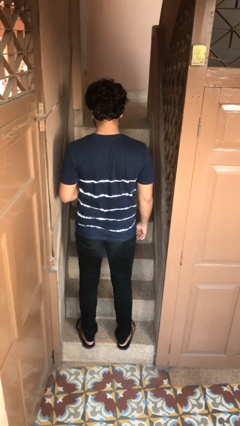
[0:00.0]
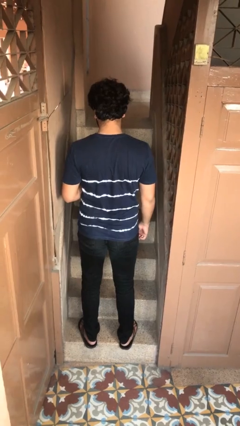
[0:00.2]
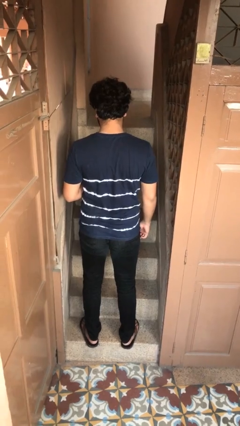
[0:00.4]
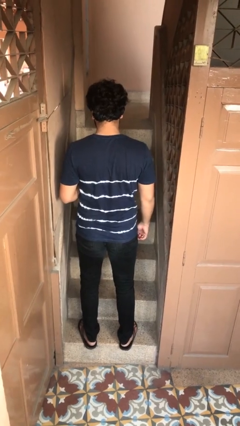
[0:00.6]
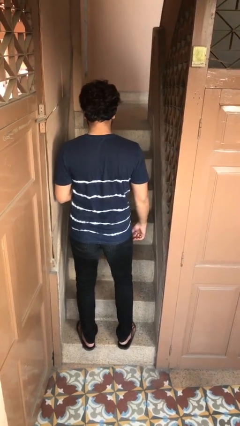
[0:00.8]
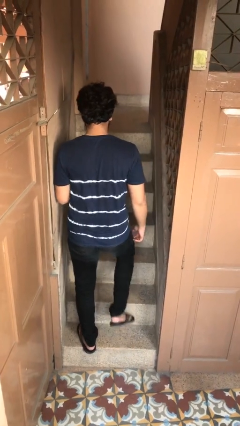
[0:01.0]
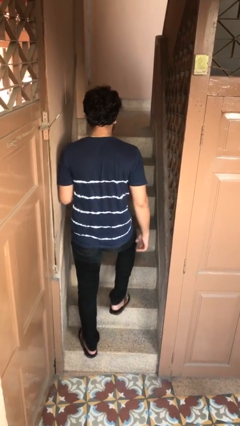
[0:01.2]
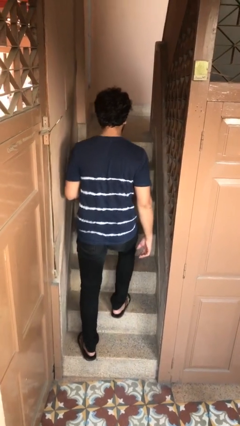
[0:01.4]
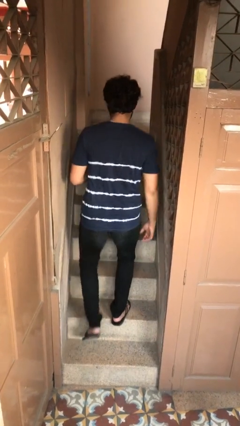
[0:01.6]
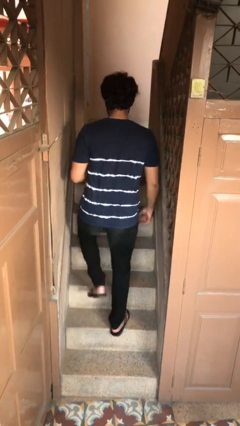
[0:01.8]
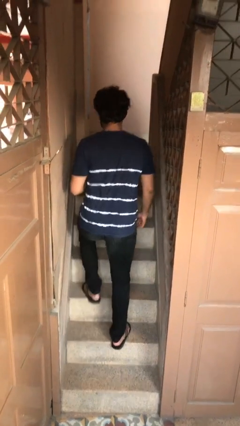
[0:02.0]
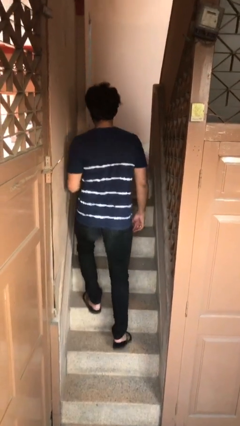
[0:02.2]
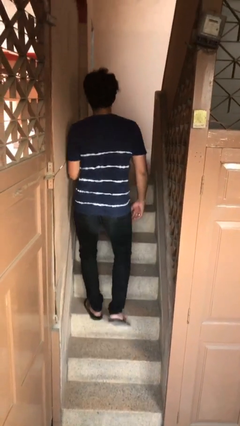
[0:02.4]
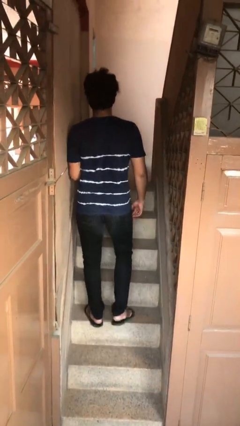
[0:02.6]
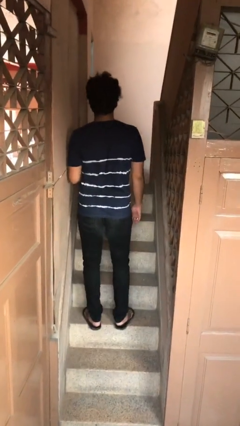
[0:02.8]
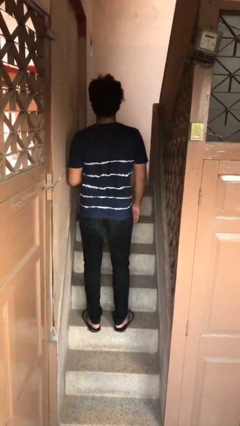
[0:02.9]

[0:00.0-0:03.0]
person climbs up stairs

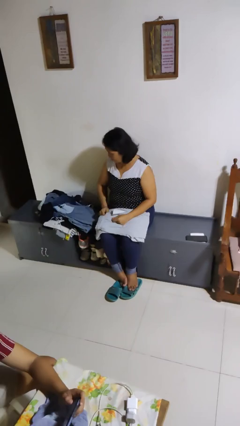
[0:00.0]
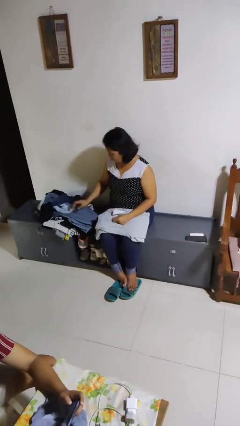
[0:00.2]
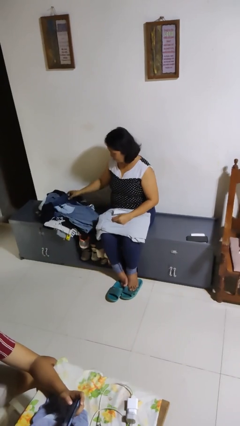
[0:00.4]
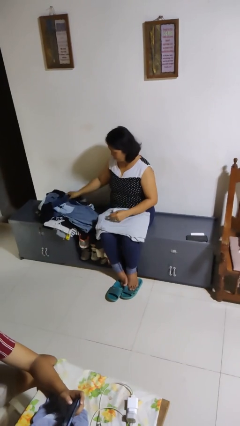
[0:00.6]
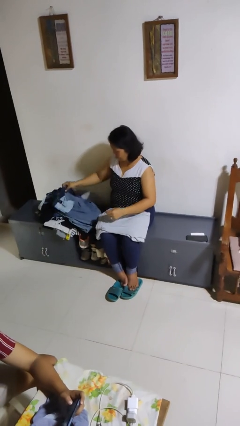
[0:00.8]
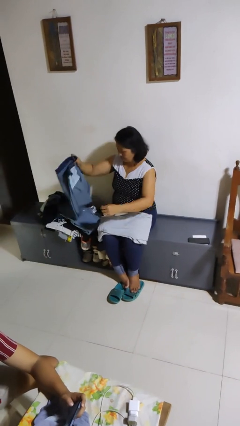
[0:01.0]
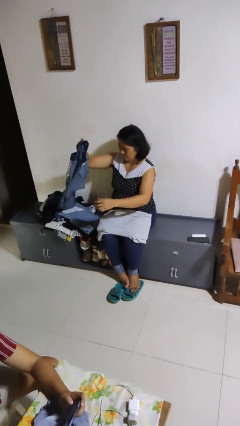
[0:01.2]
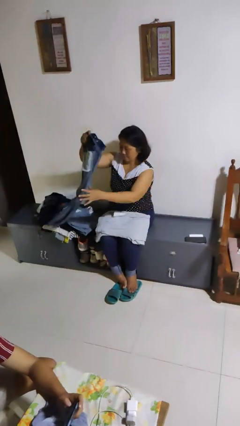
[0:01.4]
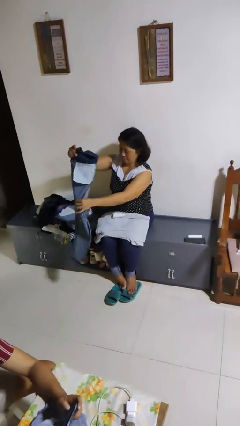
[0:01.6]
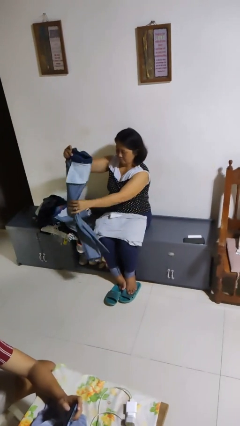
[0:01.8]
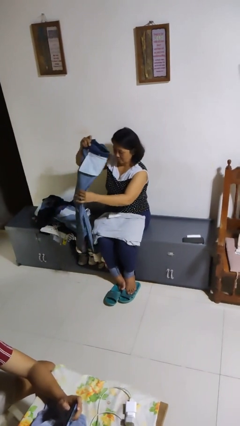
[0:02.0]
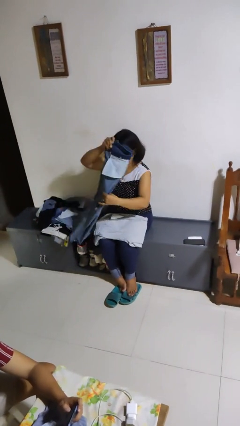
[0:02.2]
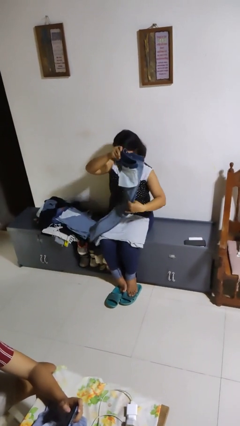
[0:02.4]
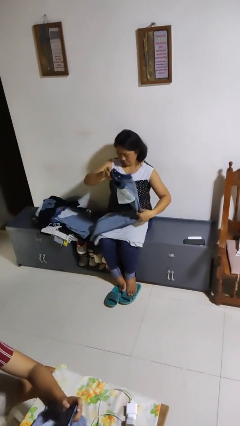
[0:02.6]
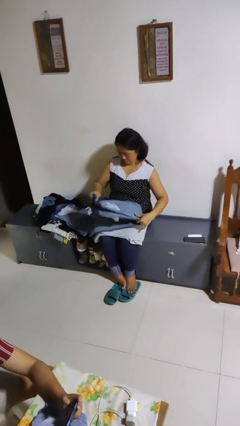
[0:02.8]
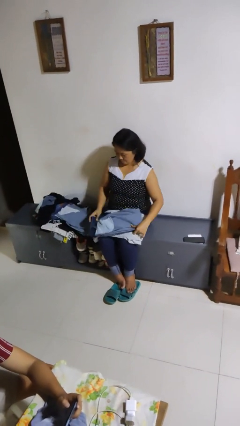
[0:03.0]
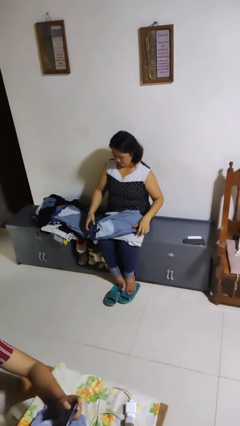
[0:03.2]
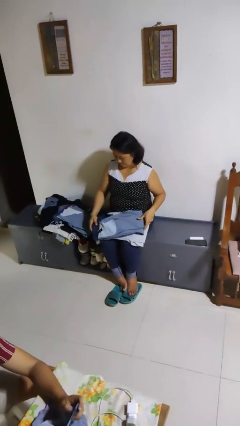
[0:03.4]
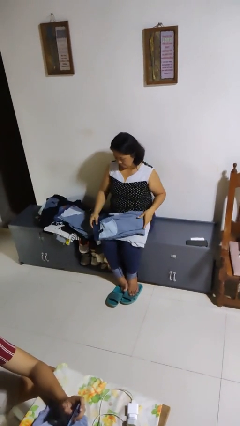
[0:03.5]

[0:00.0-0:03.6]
person folds pants

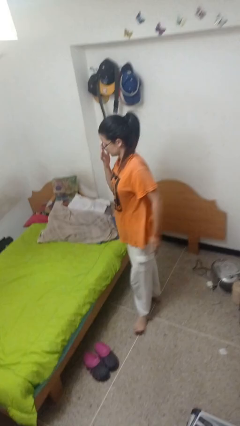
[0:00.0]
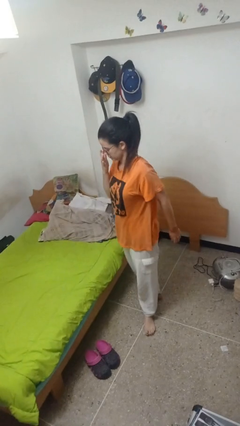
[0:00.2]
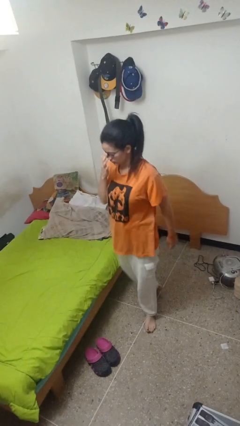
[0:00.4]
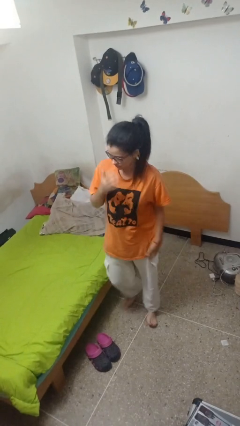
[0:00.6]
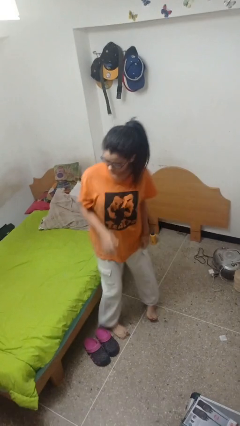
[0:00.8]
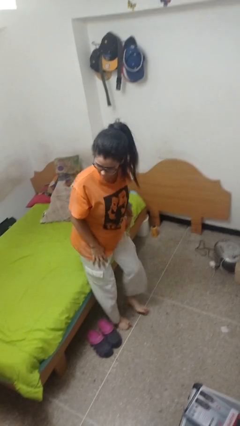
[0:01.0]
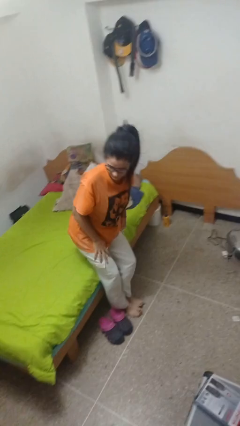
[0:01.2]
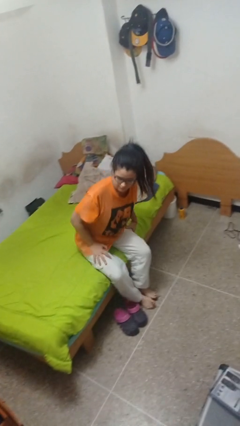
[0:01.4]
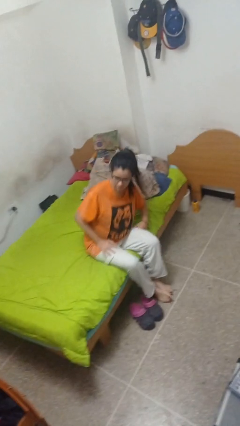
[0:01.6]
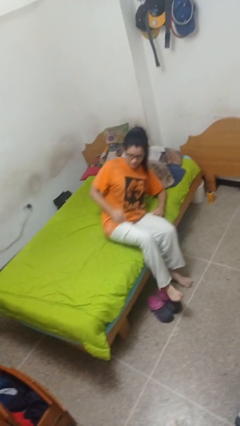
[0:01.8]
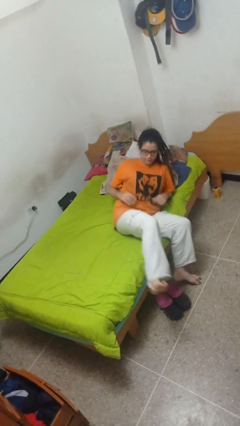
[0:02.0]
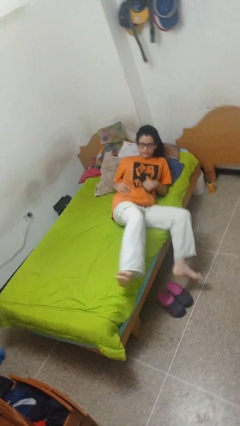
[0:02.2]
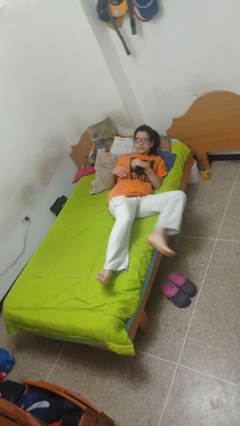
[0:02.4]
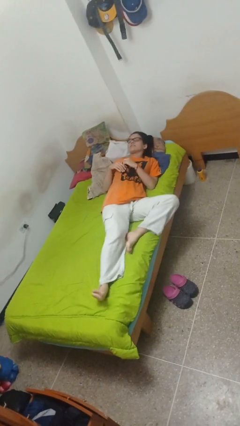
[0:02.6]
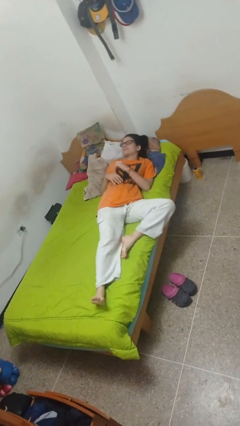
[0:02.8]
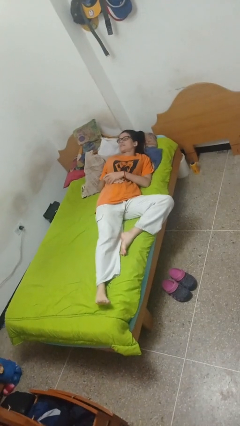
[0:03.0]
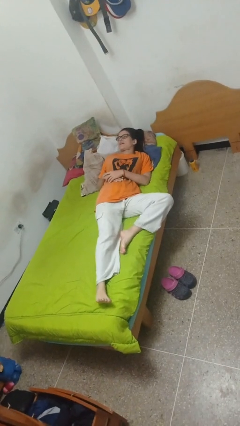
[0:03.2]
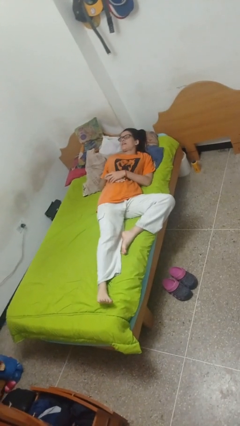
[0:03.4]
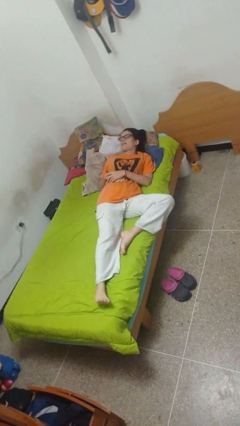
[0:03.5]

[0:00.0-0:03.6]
person lies down on bed

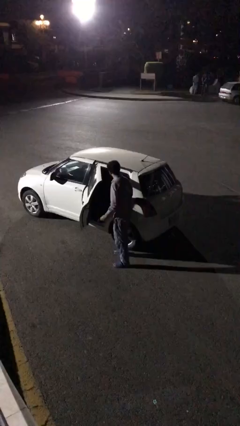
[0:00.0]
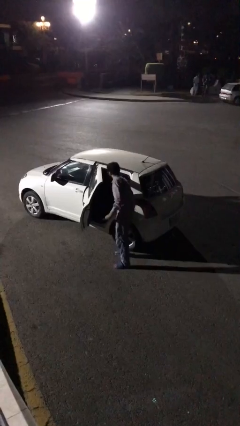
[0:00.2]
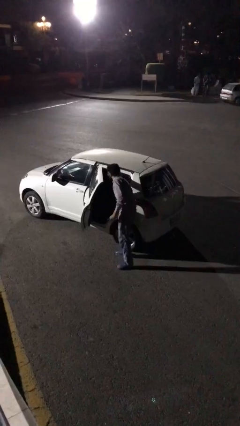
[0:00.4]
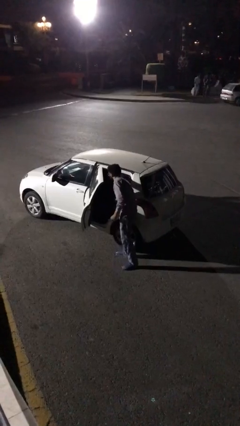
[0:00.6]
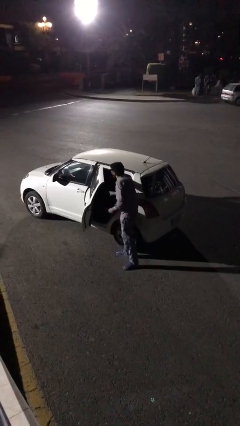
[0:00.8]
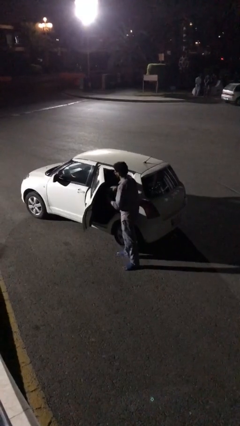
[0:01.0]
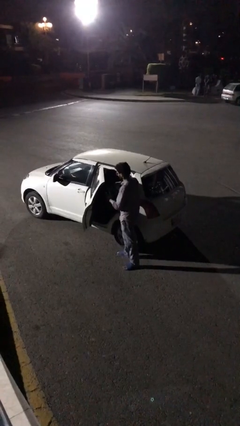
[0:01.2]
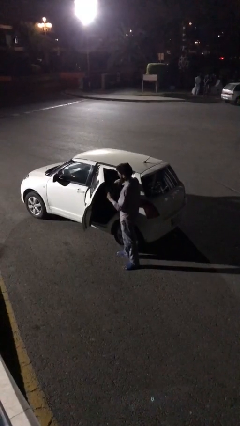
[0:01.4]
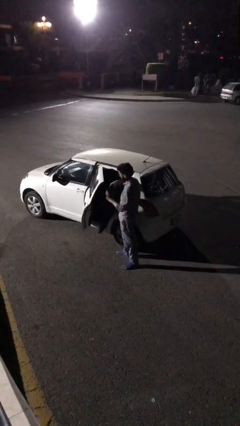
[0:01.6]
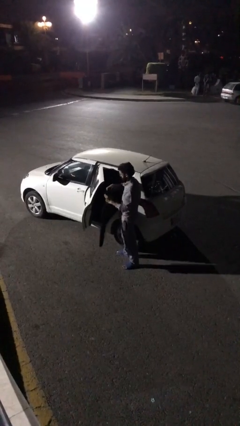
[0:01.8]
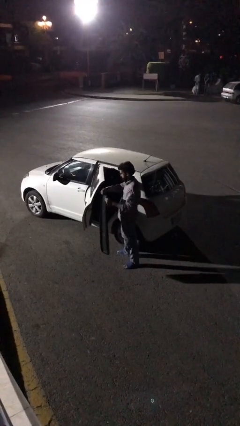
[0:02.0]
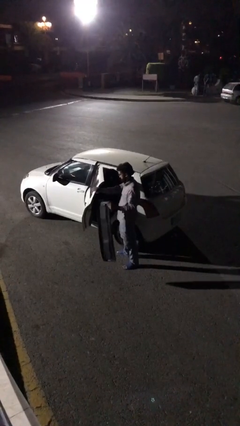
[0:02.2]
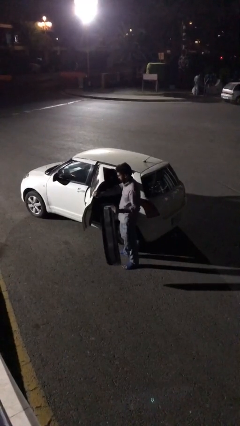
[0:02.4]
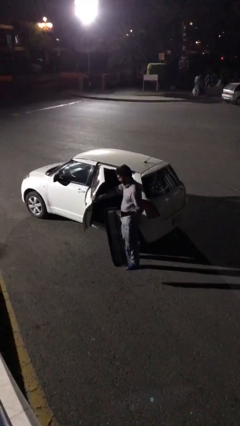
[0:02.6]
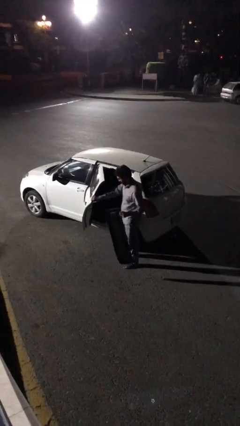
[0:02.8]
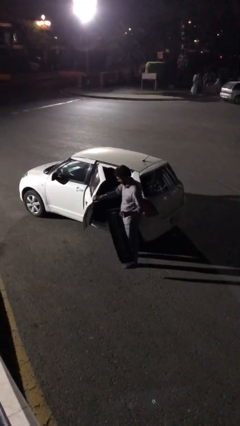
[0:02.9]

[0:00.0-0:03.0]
person unloads car

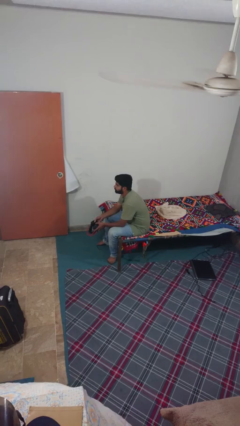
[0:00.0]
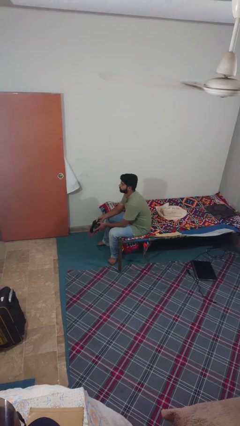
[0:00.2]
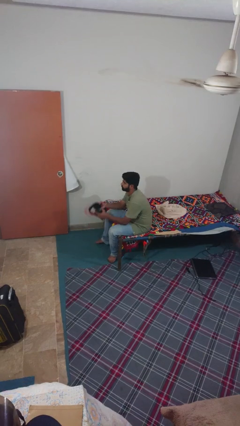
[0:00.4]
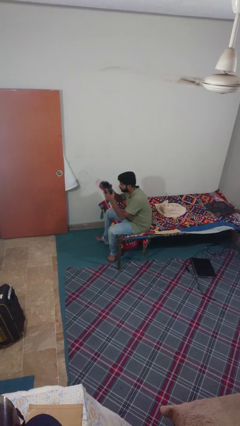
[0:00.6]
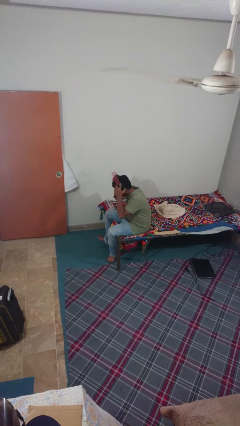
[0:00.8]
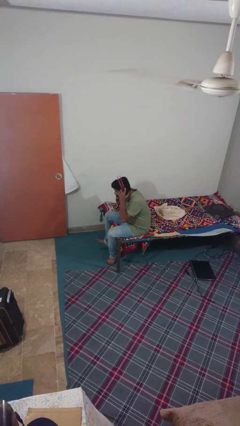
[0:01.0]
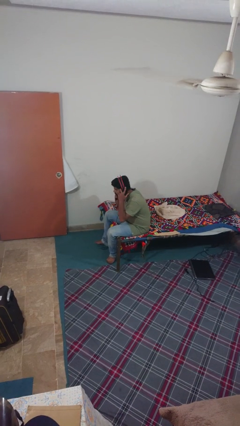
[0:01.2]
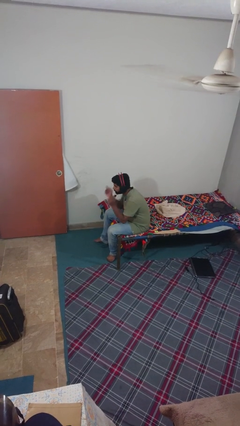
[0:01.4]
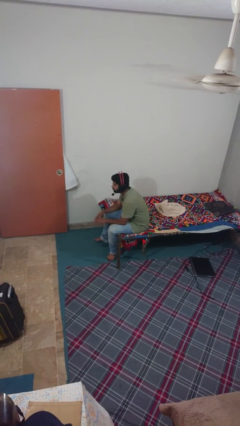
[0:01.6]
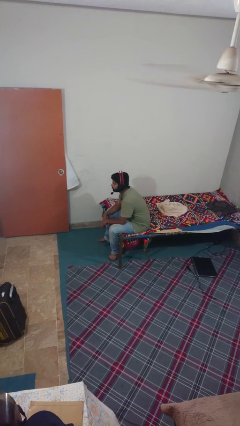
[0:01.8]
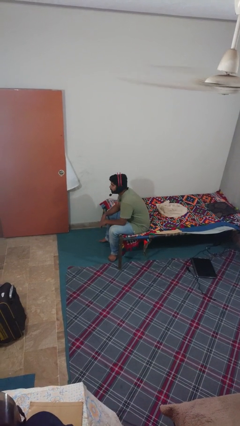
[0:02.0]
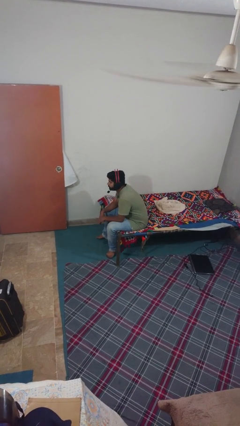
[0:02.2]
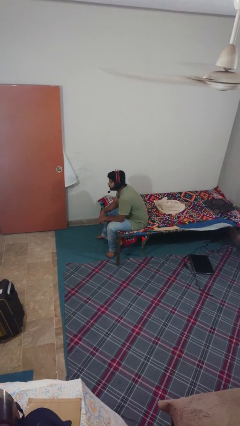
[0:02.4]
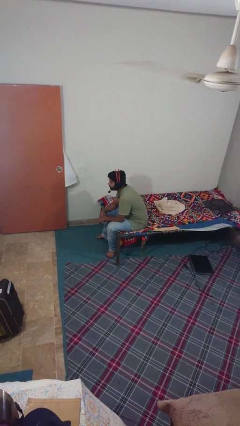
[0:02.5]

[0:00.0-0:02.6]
person puts on headphones

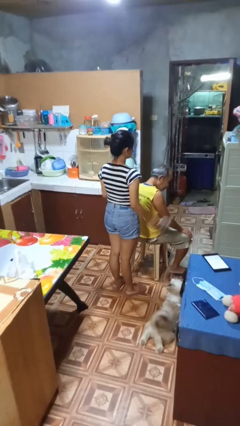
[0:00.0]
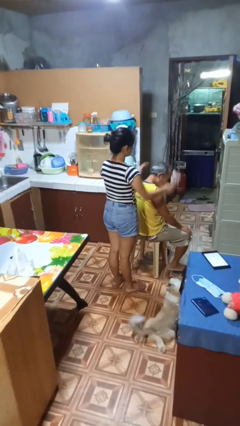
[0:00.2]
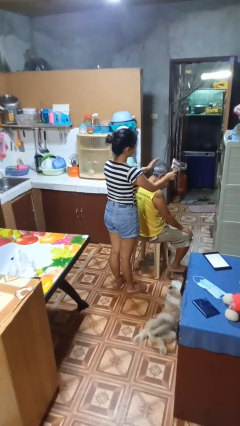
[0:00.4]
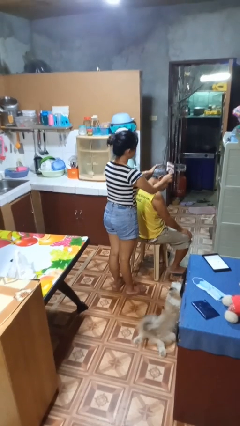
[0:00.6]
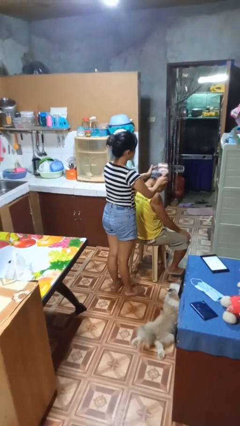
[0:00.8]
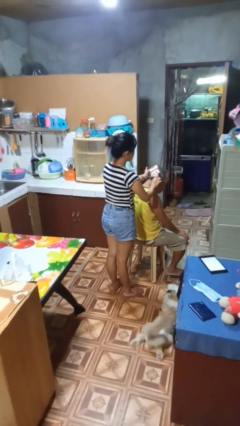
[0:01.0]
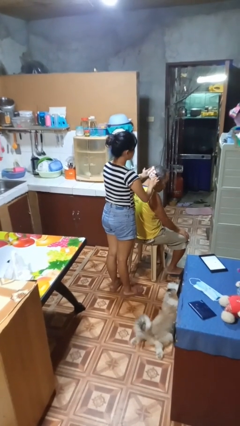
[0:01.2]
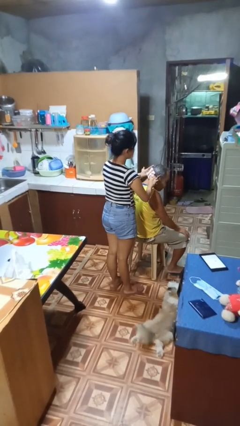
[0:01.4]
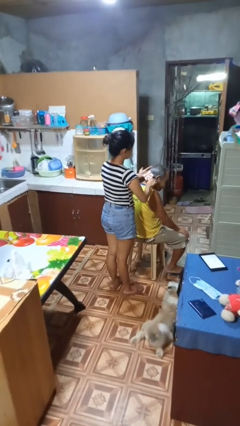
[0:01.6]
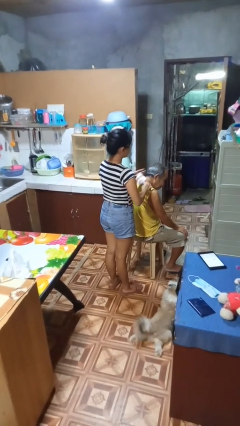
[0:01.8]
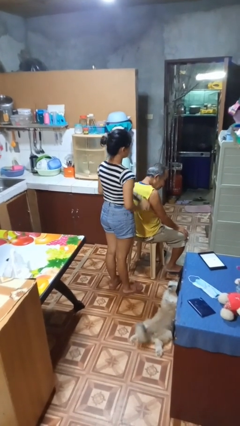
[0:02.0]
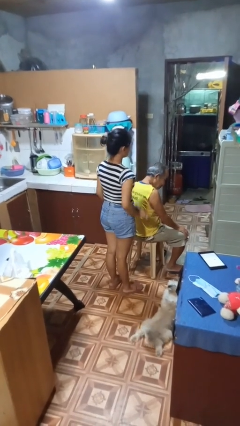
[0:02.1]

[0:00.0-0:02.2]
person brushes hair of person
